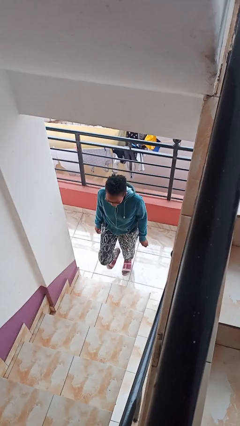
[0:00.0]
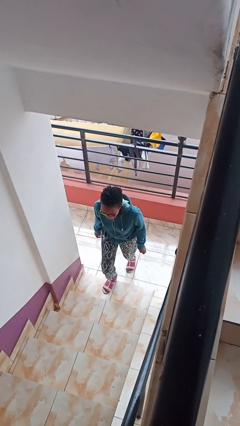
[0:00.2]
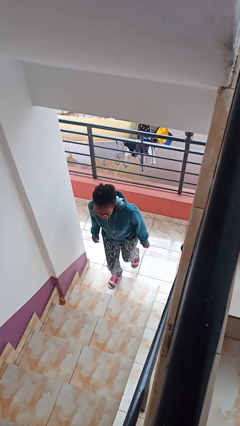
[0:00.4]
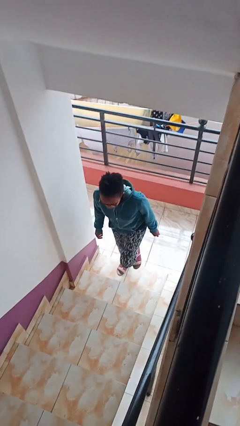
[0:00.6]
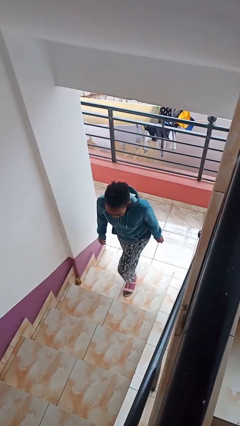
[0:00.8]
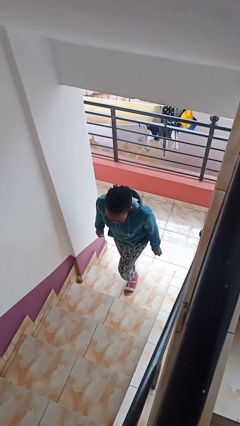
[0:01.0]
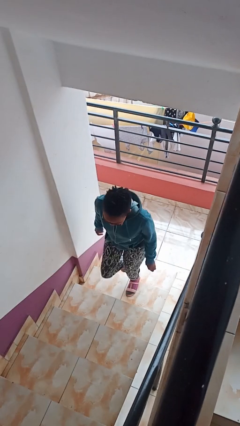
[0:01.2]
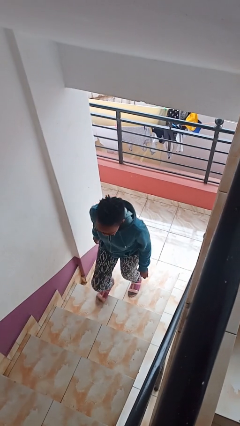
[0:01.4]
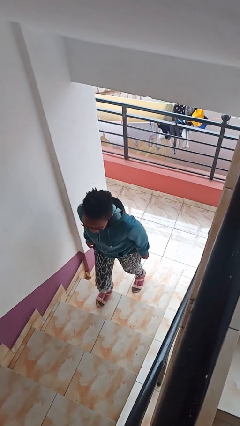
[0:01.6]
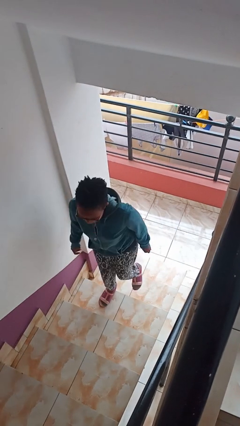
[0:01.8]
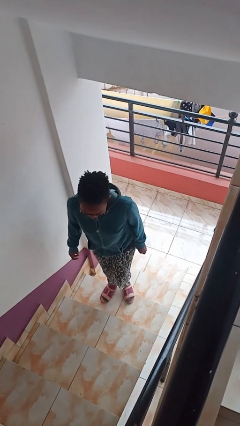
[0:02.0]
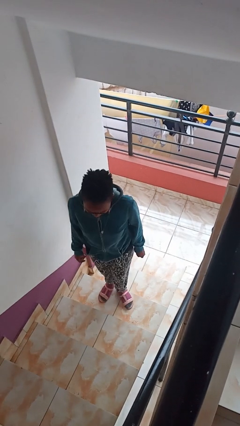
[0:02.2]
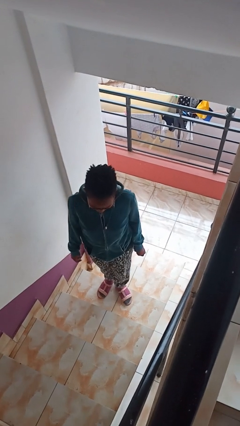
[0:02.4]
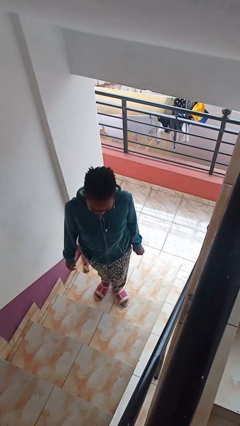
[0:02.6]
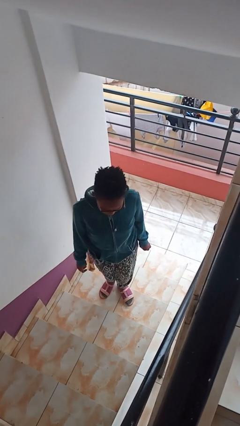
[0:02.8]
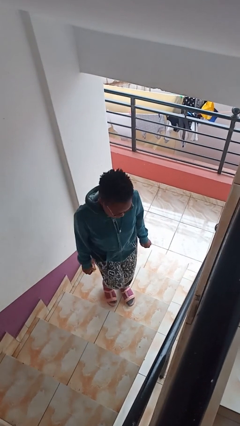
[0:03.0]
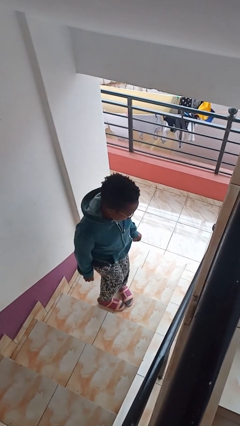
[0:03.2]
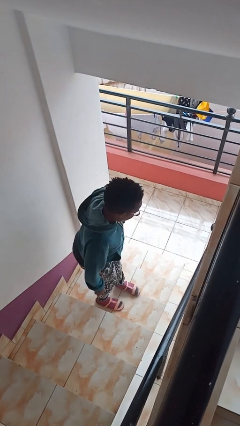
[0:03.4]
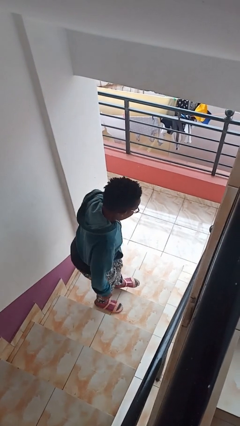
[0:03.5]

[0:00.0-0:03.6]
person climbs up stairs

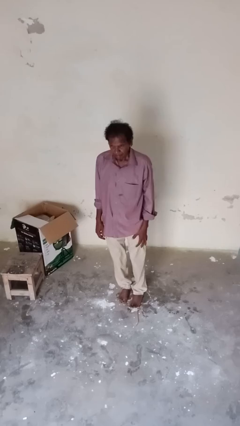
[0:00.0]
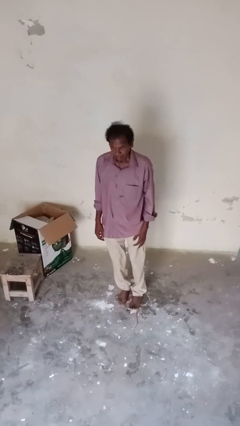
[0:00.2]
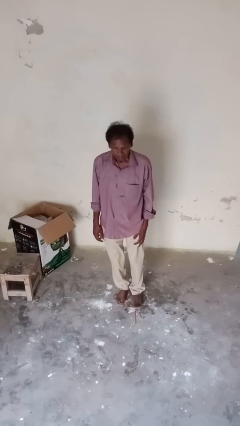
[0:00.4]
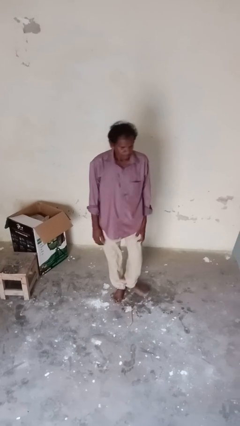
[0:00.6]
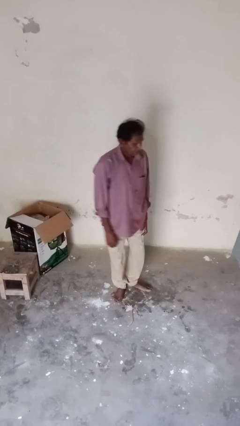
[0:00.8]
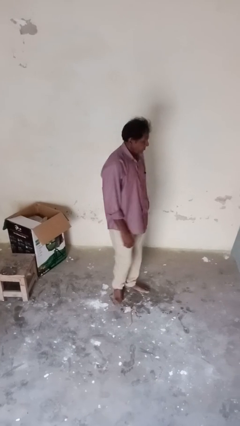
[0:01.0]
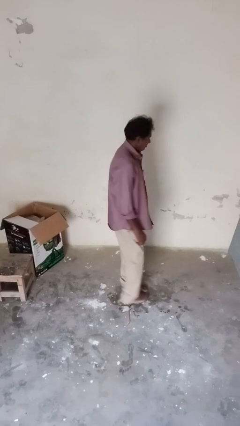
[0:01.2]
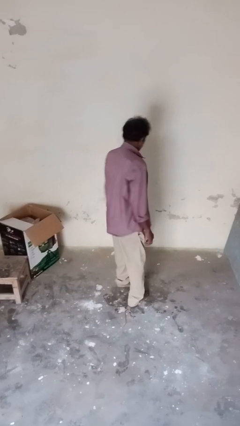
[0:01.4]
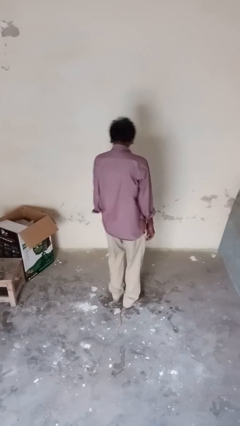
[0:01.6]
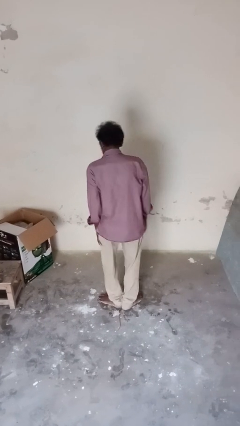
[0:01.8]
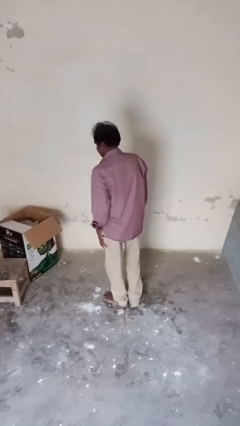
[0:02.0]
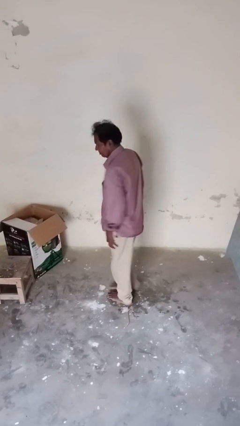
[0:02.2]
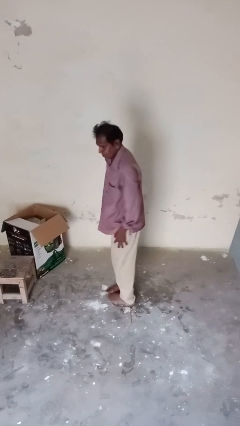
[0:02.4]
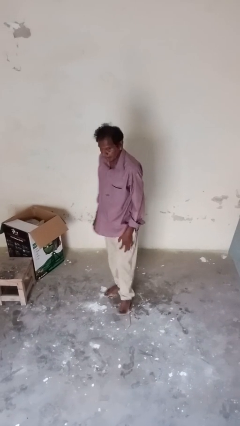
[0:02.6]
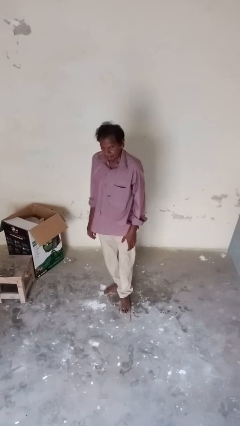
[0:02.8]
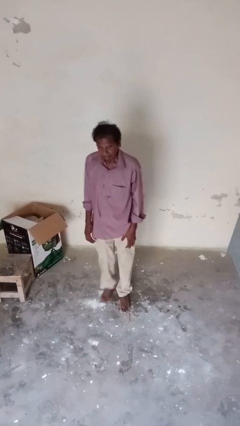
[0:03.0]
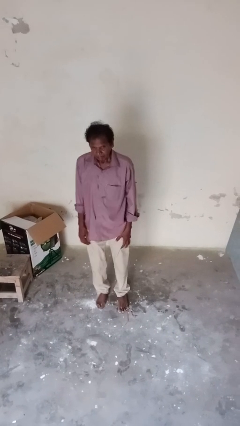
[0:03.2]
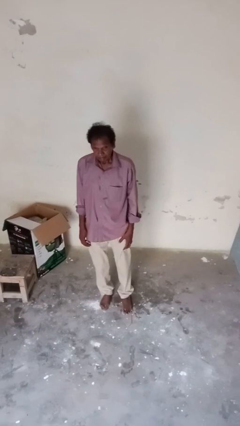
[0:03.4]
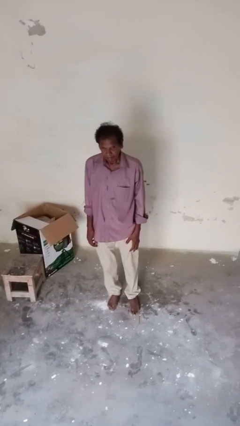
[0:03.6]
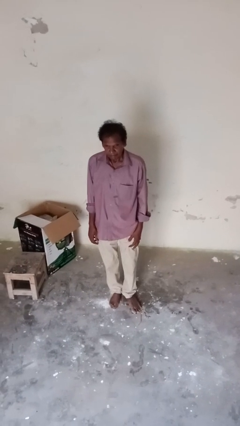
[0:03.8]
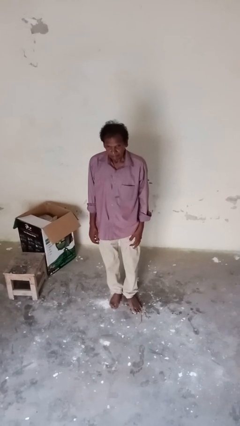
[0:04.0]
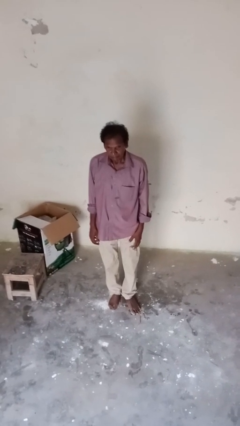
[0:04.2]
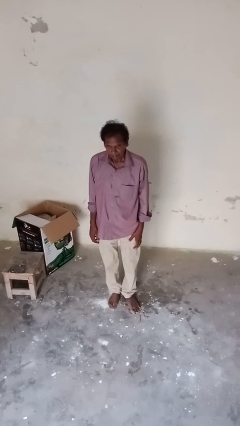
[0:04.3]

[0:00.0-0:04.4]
person twirls

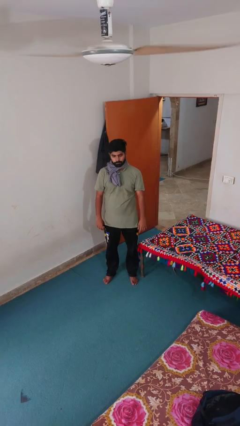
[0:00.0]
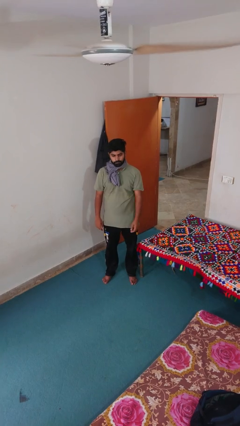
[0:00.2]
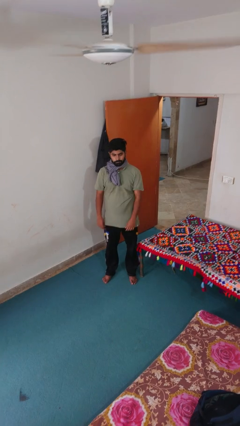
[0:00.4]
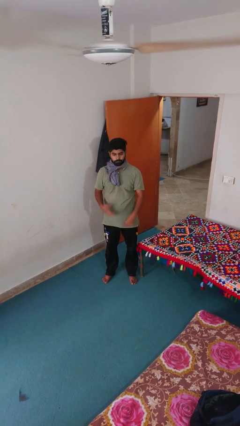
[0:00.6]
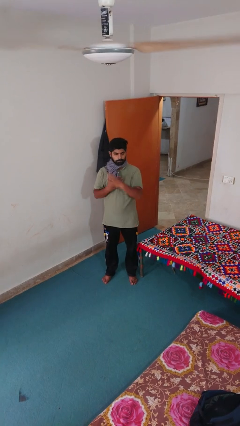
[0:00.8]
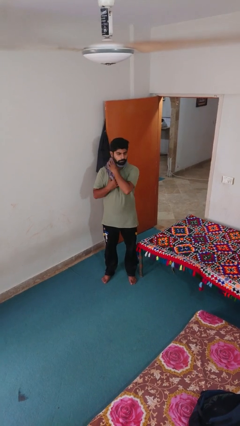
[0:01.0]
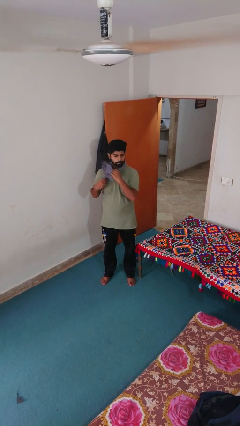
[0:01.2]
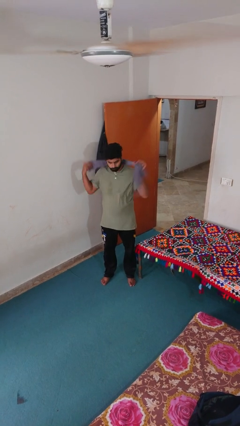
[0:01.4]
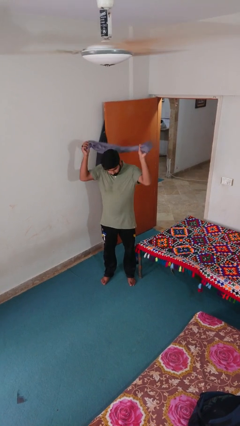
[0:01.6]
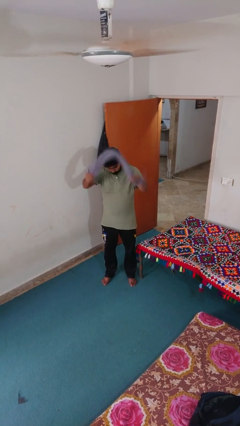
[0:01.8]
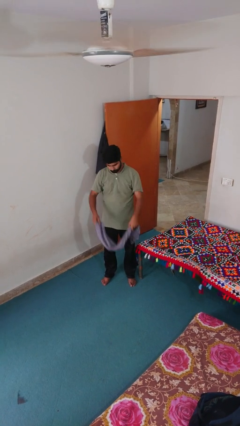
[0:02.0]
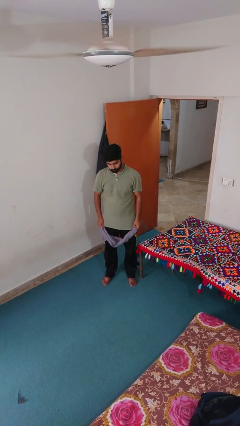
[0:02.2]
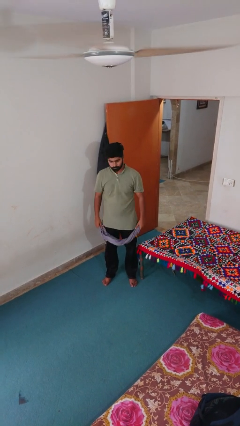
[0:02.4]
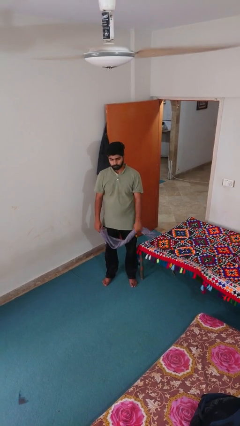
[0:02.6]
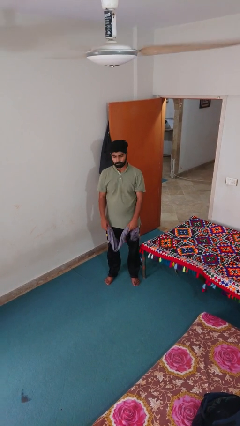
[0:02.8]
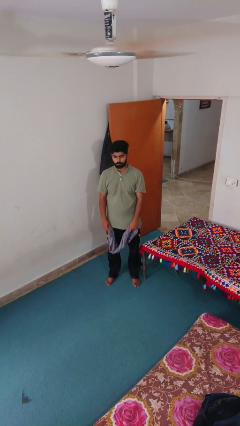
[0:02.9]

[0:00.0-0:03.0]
person takes off scarf

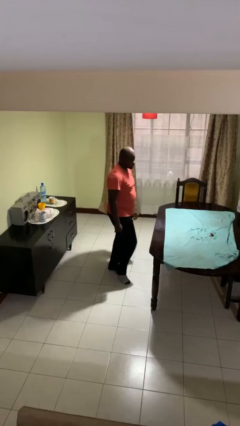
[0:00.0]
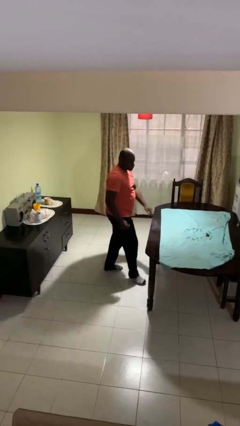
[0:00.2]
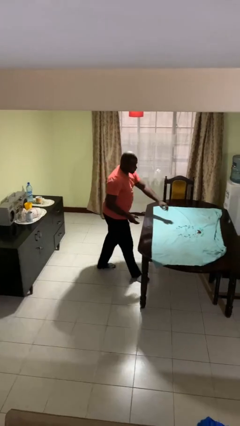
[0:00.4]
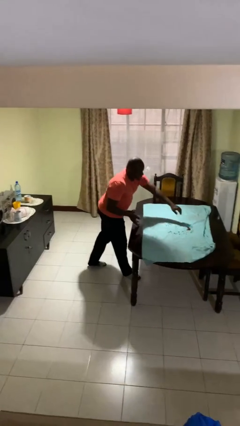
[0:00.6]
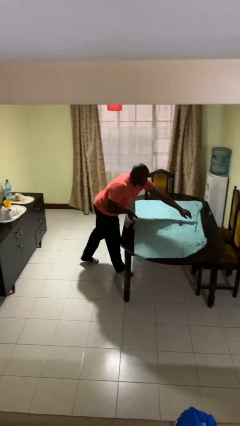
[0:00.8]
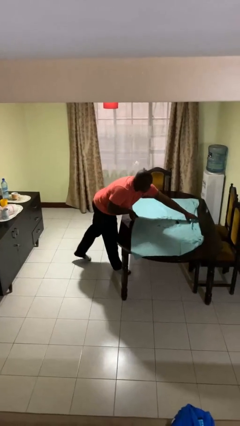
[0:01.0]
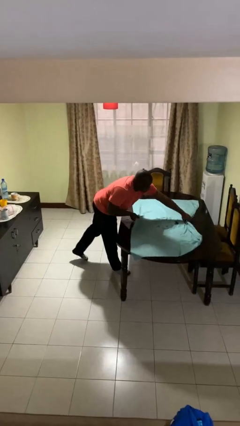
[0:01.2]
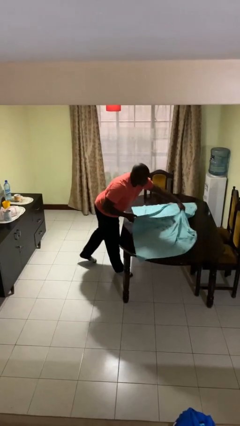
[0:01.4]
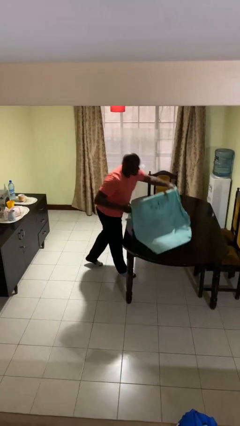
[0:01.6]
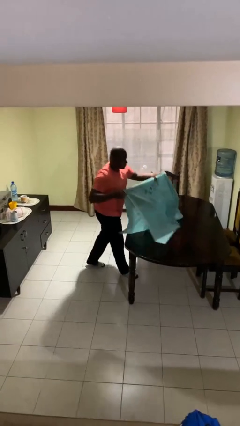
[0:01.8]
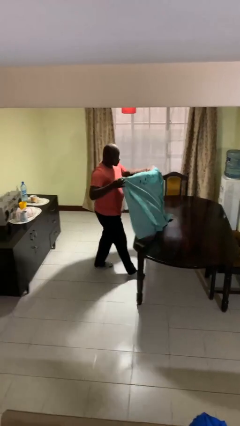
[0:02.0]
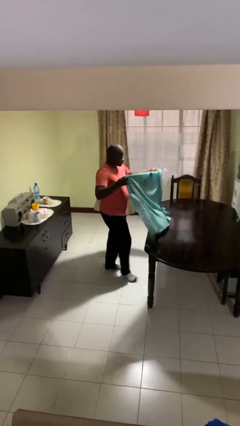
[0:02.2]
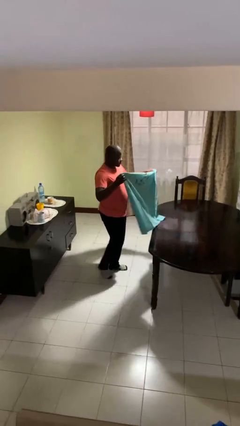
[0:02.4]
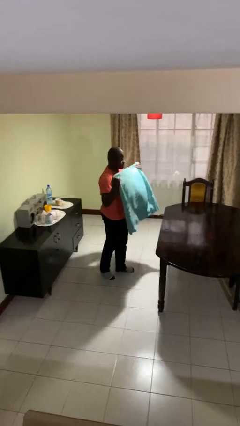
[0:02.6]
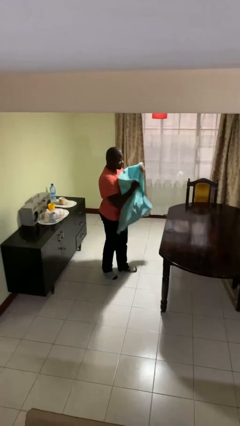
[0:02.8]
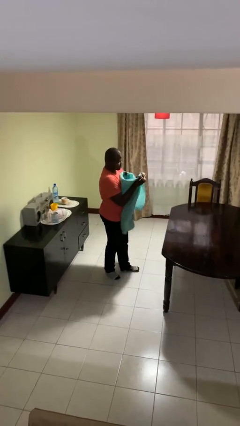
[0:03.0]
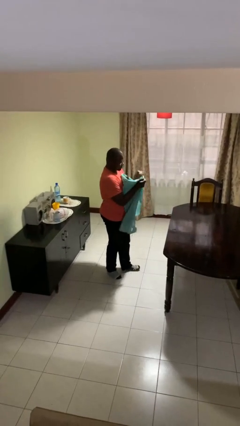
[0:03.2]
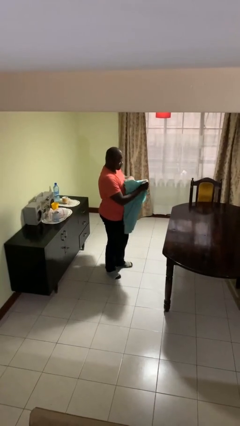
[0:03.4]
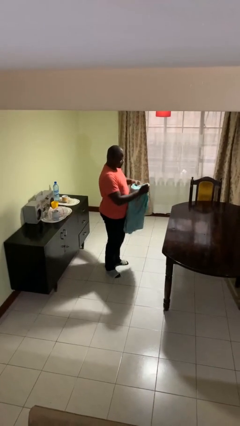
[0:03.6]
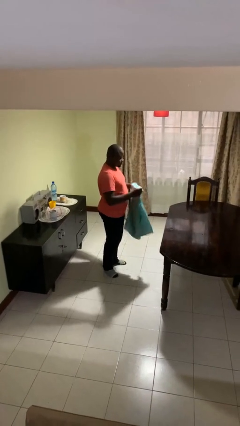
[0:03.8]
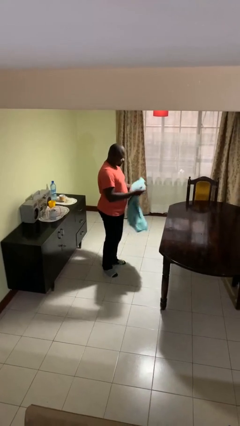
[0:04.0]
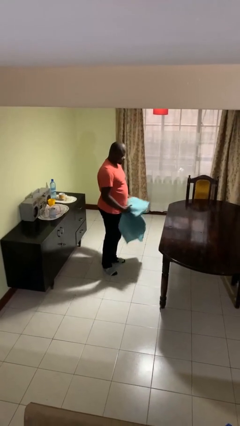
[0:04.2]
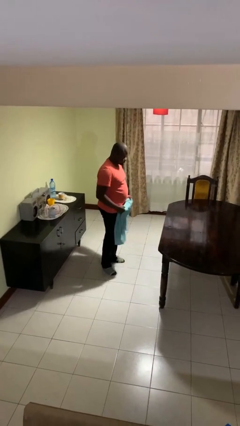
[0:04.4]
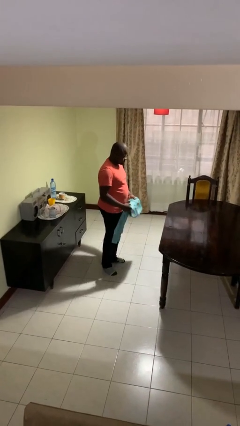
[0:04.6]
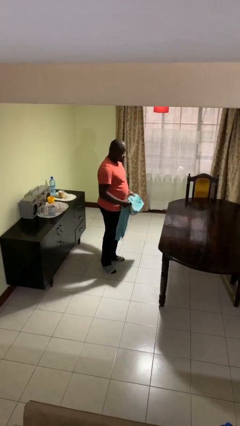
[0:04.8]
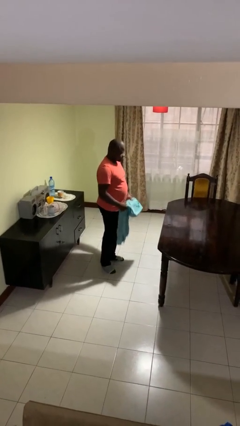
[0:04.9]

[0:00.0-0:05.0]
person folds tablecloth

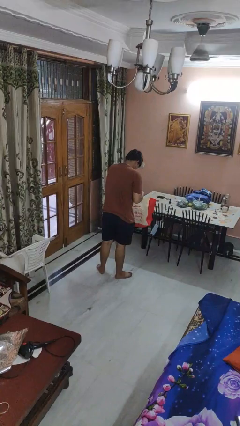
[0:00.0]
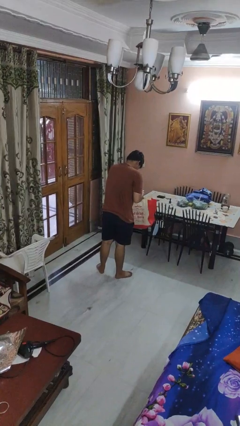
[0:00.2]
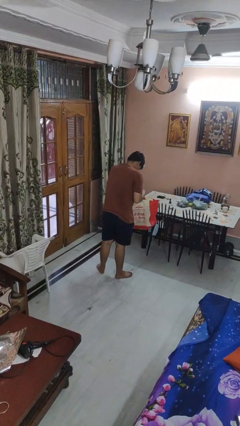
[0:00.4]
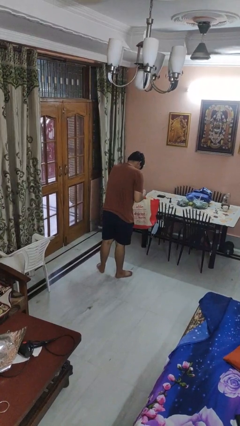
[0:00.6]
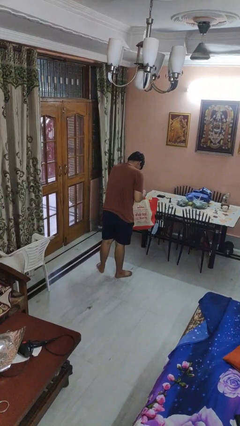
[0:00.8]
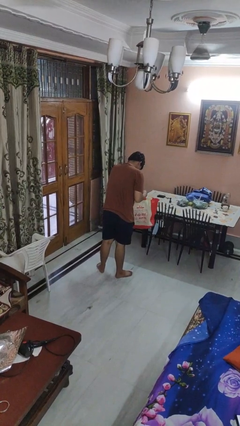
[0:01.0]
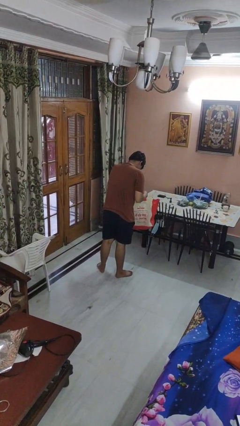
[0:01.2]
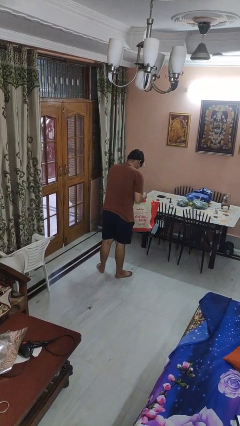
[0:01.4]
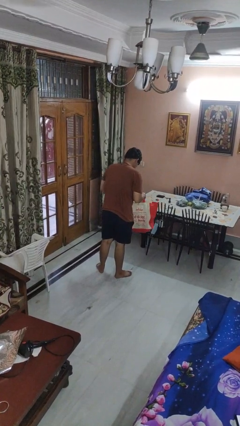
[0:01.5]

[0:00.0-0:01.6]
person searches in bag
